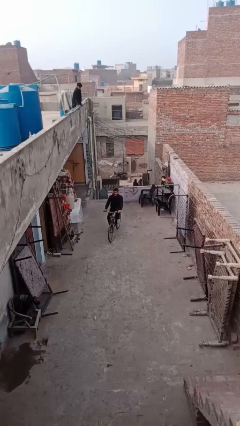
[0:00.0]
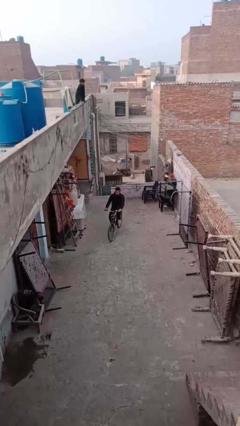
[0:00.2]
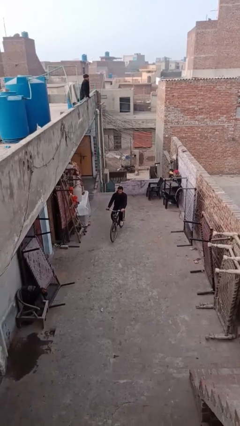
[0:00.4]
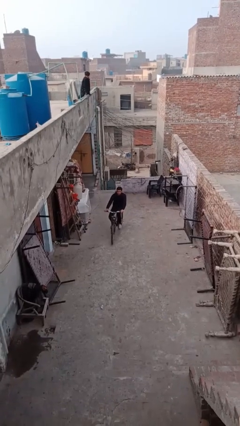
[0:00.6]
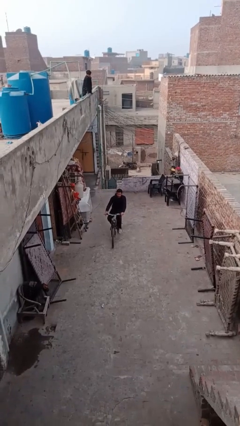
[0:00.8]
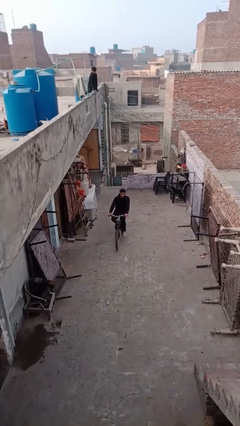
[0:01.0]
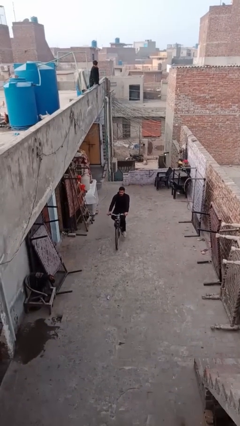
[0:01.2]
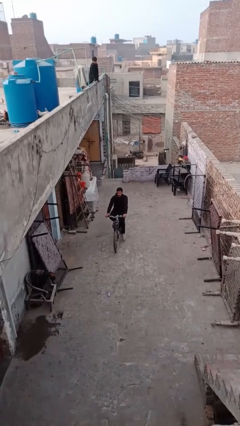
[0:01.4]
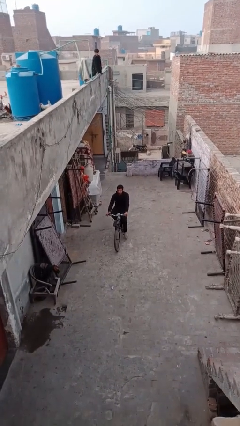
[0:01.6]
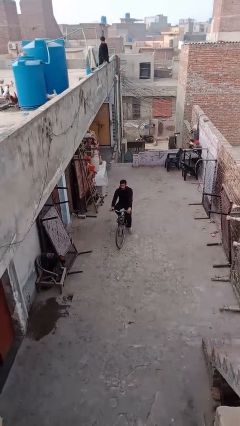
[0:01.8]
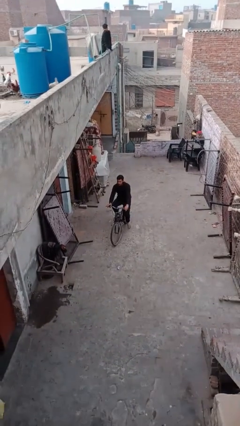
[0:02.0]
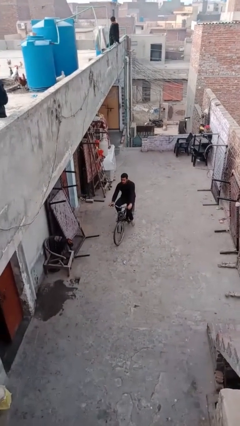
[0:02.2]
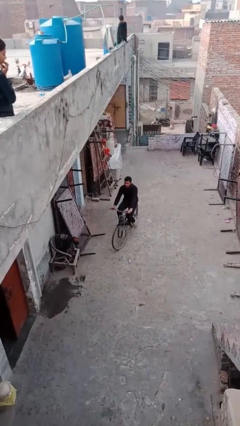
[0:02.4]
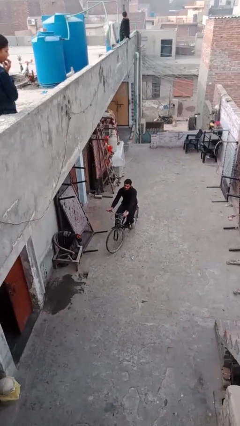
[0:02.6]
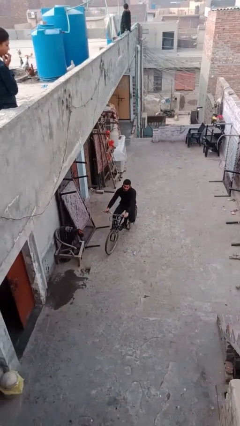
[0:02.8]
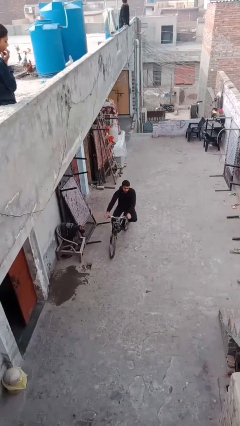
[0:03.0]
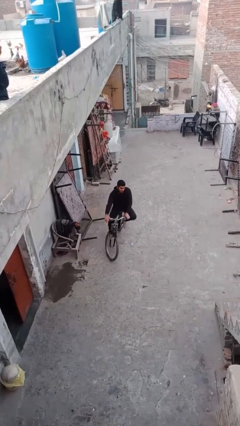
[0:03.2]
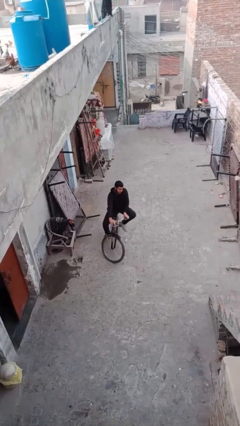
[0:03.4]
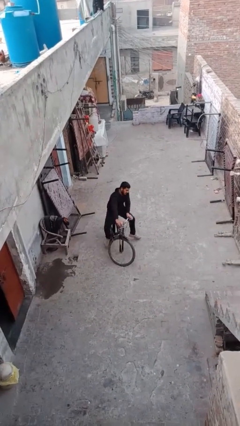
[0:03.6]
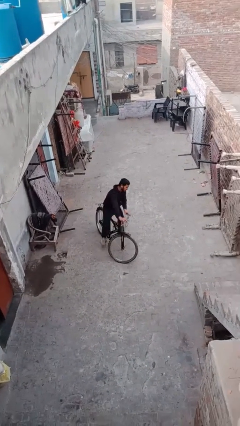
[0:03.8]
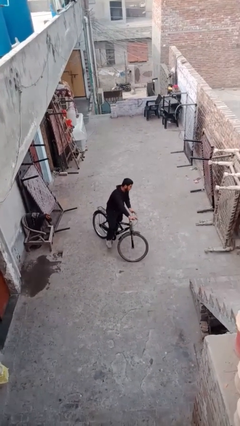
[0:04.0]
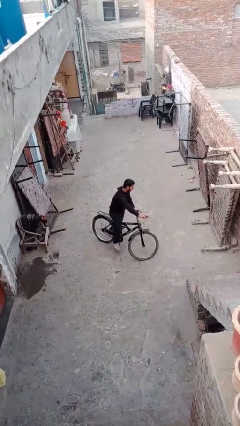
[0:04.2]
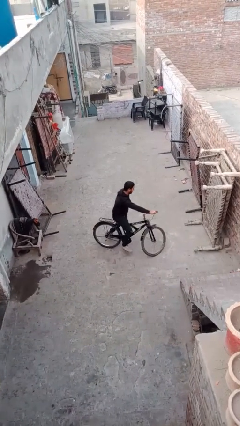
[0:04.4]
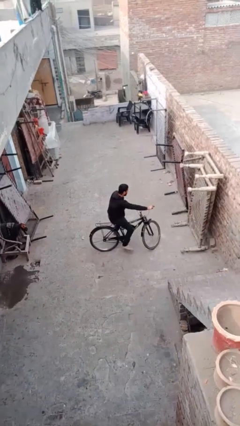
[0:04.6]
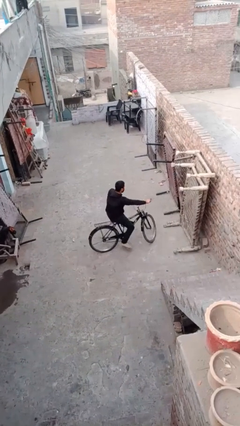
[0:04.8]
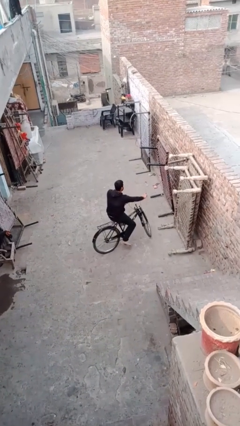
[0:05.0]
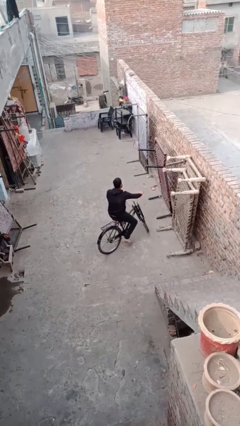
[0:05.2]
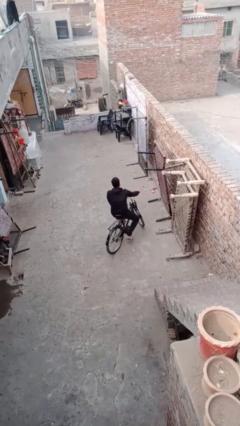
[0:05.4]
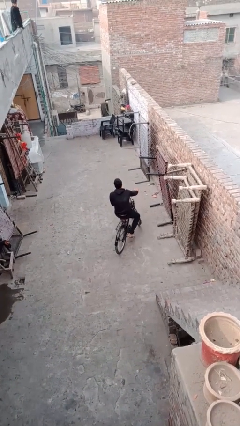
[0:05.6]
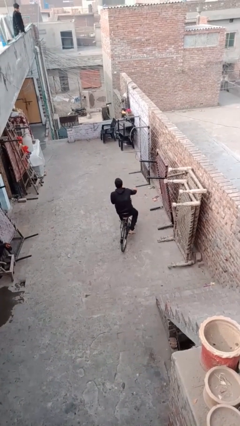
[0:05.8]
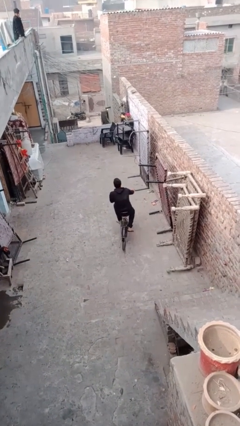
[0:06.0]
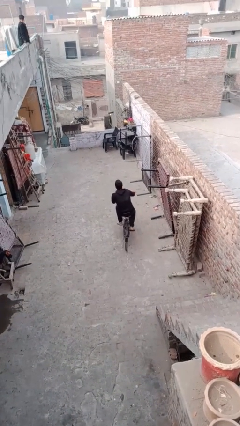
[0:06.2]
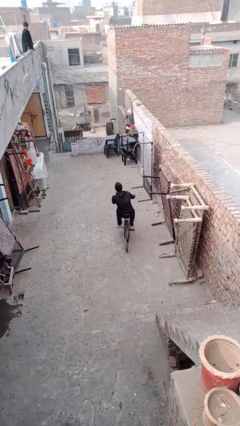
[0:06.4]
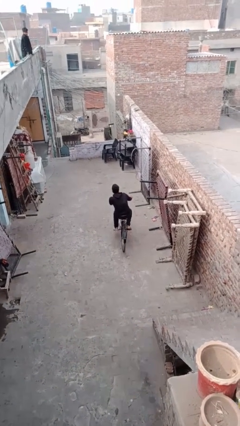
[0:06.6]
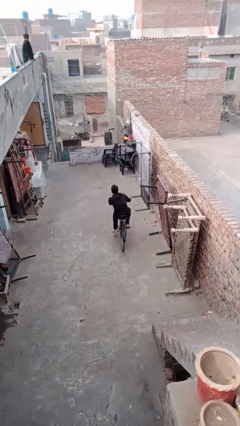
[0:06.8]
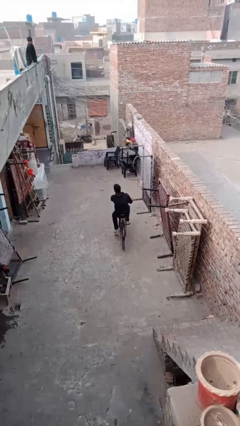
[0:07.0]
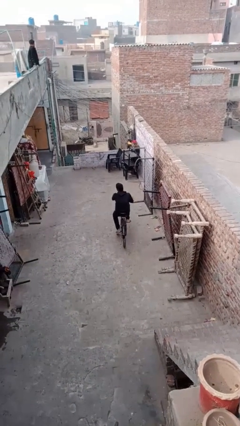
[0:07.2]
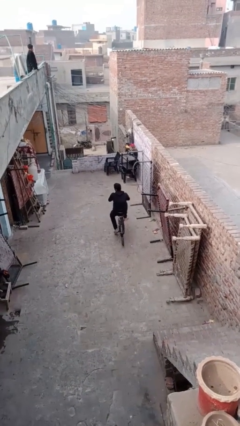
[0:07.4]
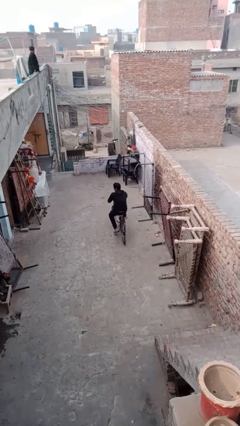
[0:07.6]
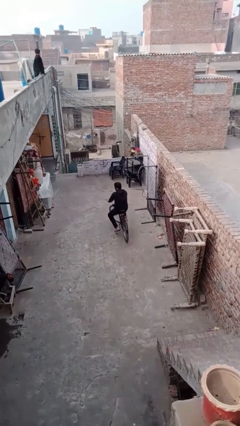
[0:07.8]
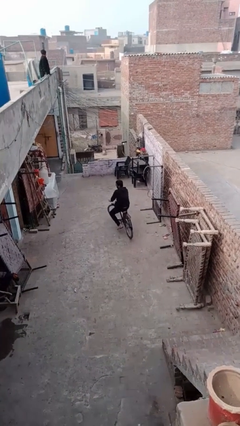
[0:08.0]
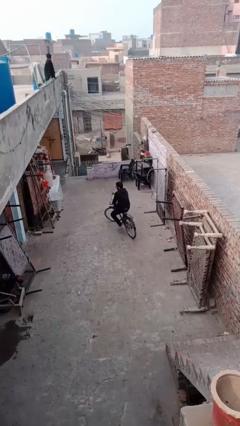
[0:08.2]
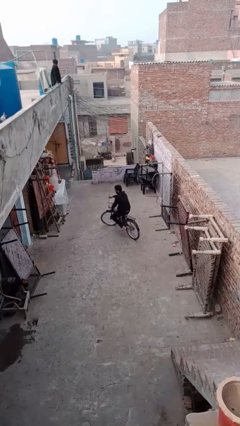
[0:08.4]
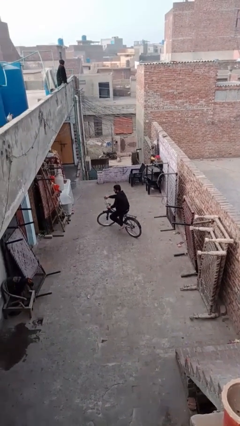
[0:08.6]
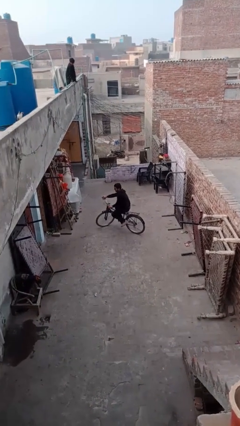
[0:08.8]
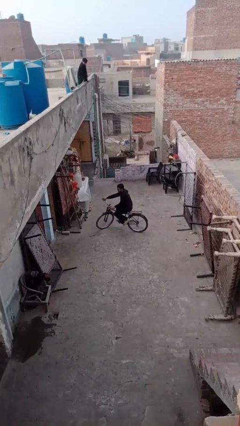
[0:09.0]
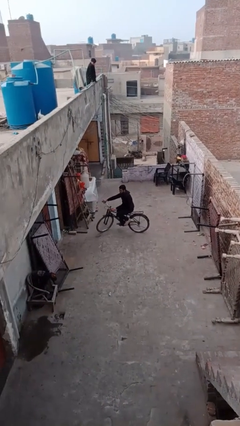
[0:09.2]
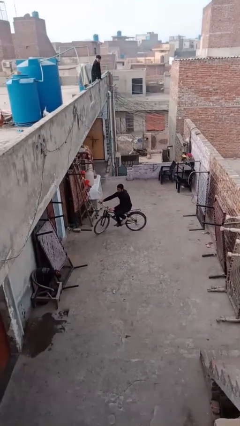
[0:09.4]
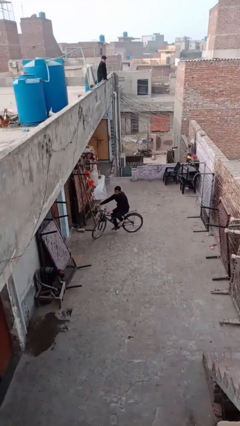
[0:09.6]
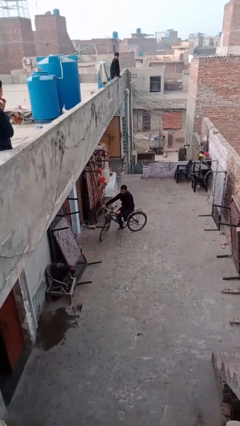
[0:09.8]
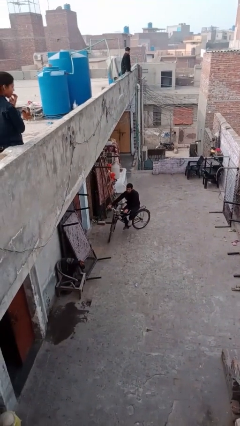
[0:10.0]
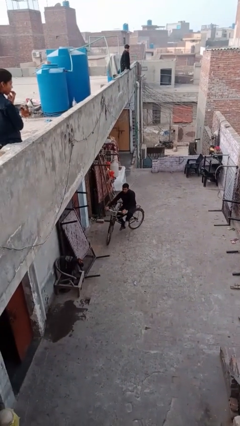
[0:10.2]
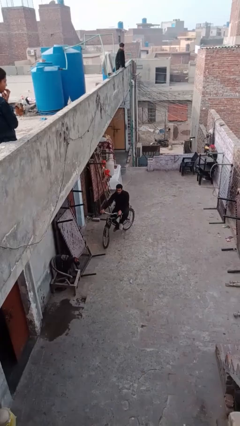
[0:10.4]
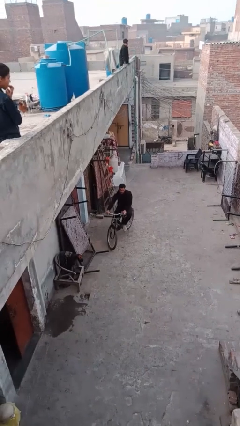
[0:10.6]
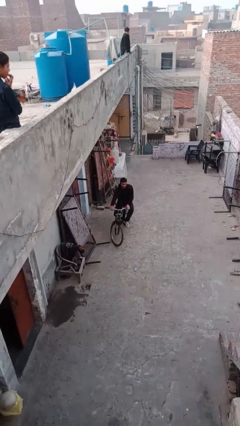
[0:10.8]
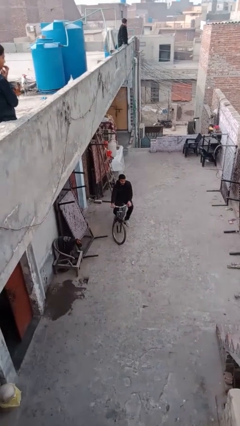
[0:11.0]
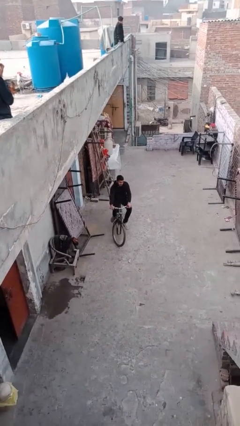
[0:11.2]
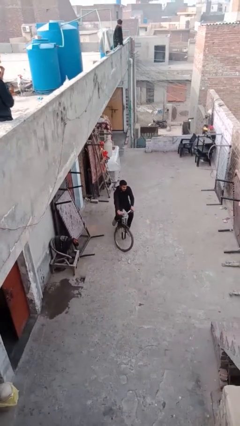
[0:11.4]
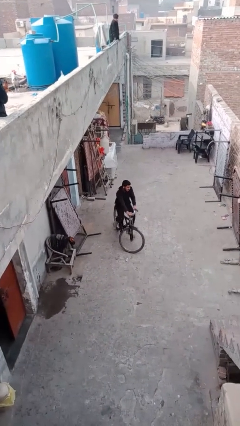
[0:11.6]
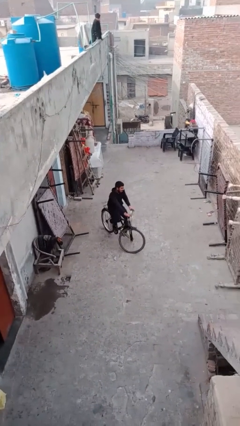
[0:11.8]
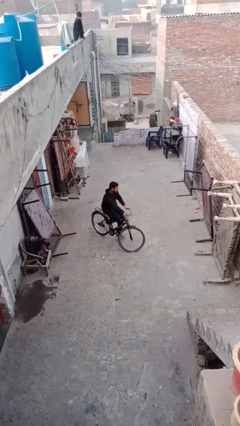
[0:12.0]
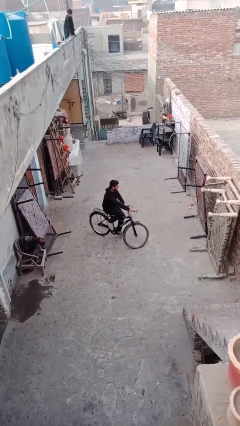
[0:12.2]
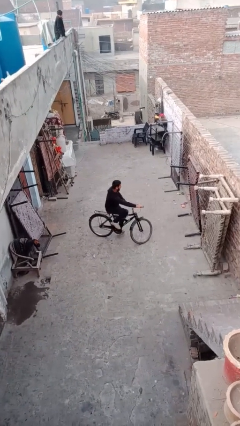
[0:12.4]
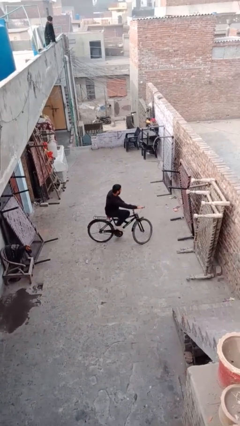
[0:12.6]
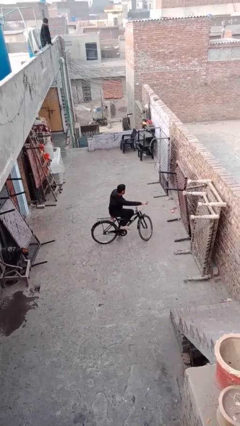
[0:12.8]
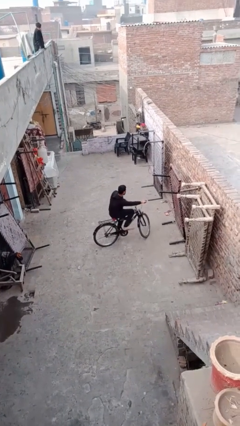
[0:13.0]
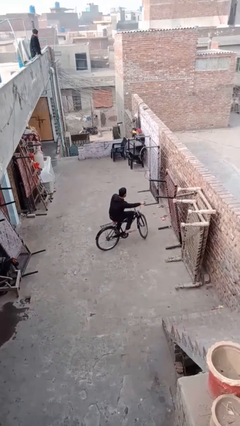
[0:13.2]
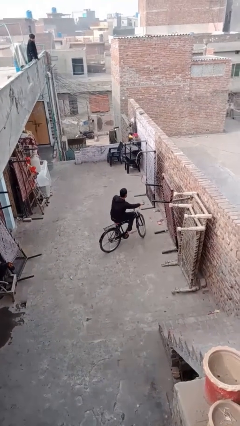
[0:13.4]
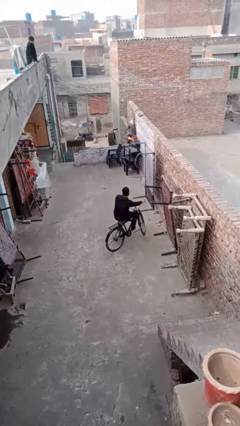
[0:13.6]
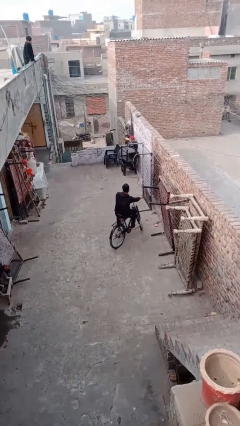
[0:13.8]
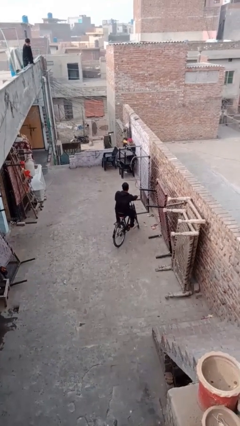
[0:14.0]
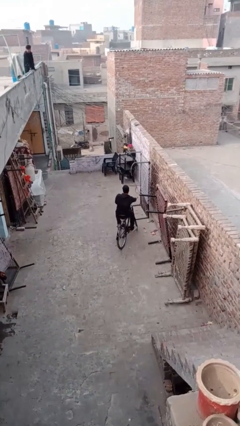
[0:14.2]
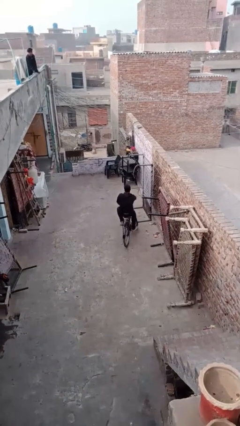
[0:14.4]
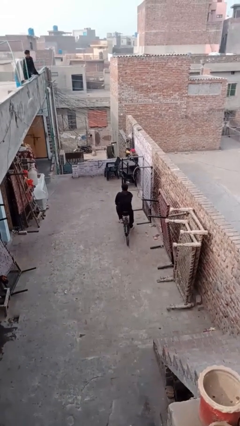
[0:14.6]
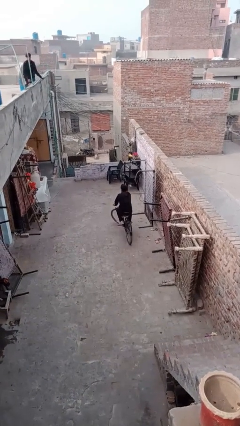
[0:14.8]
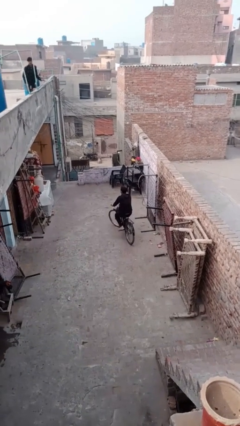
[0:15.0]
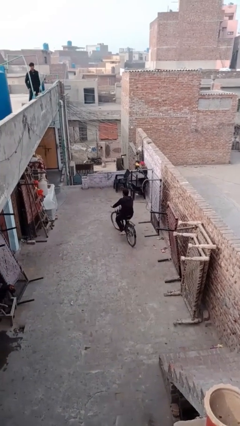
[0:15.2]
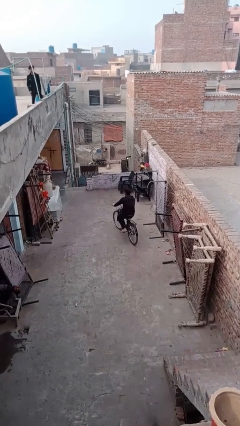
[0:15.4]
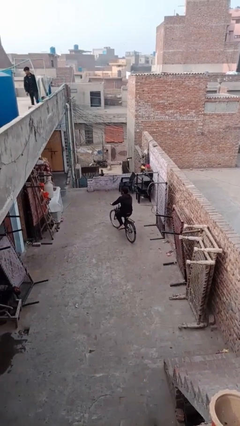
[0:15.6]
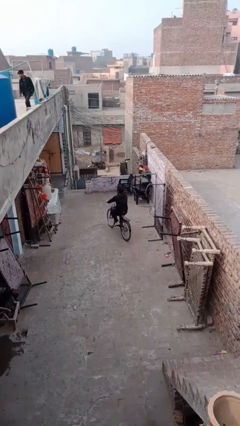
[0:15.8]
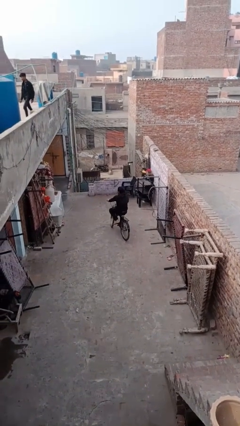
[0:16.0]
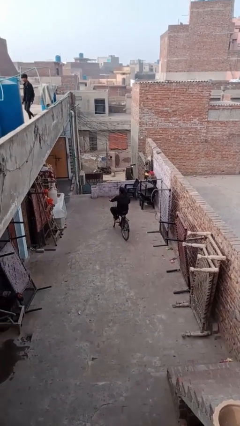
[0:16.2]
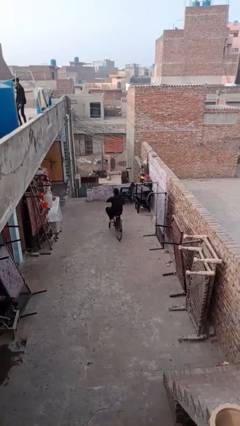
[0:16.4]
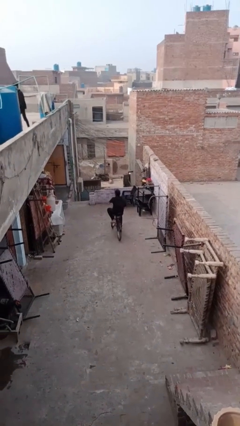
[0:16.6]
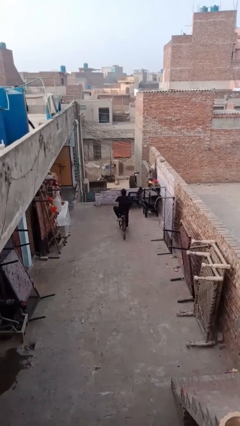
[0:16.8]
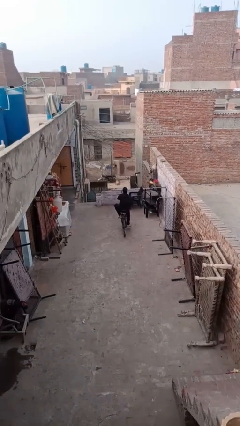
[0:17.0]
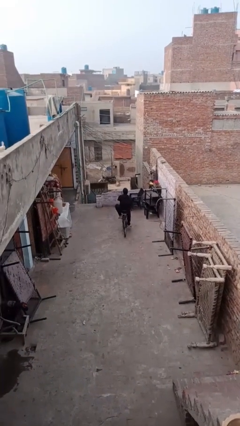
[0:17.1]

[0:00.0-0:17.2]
person rides bicycle

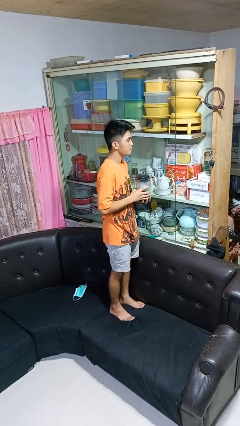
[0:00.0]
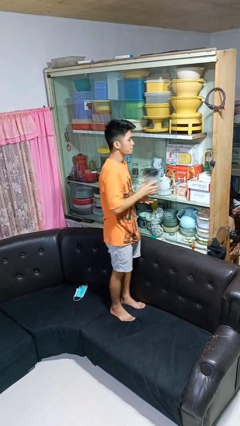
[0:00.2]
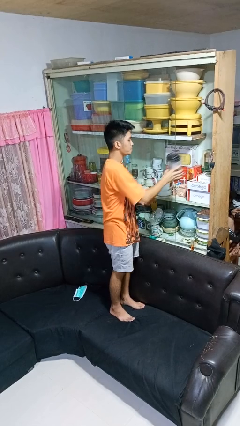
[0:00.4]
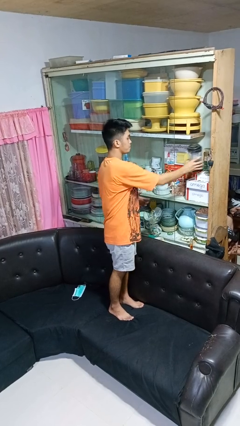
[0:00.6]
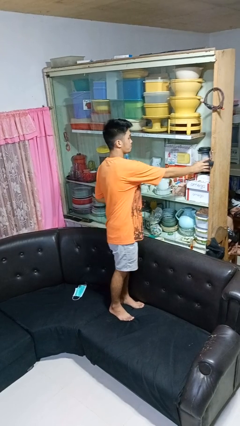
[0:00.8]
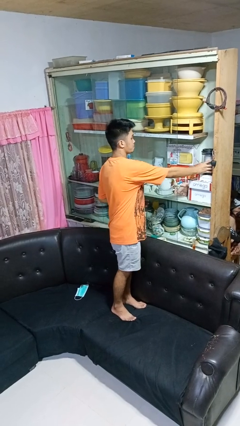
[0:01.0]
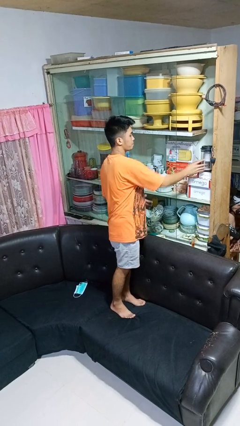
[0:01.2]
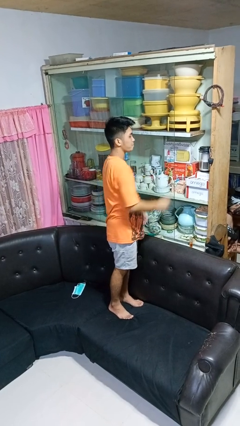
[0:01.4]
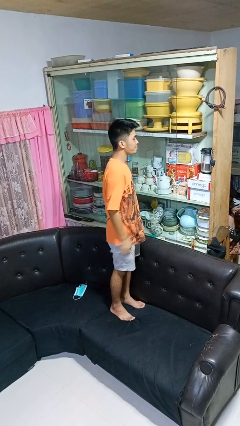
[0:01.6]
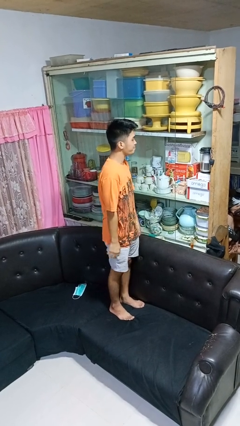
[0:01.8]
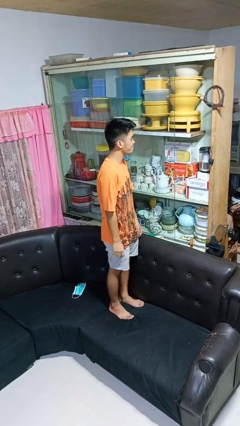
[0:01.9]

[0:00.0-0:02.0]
person puts down object into cabinet
